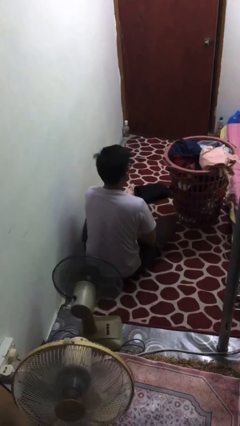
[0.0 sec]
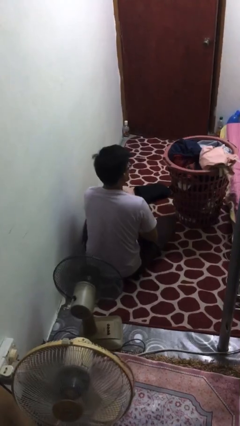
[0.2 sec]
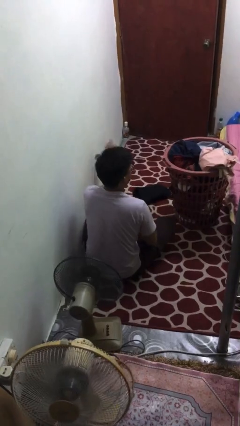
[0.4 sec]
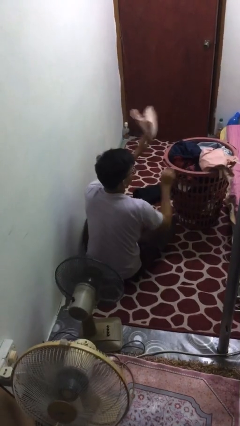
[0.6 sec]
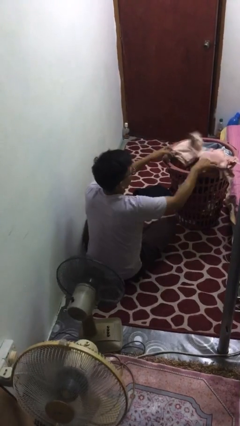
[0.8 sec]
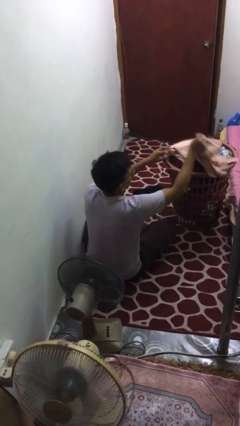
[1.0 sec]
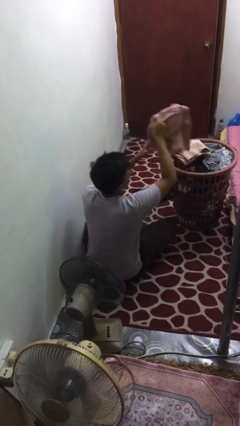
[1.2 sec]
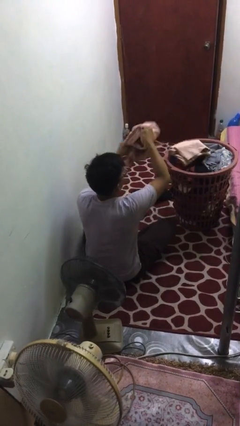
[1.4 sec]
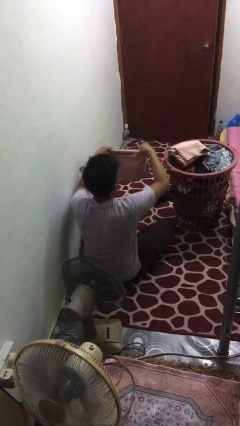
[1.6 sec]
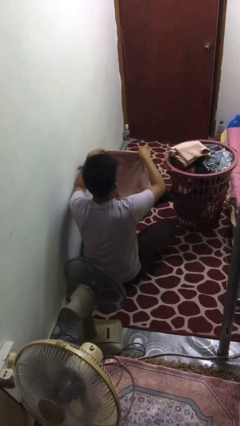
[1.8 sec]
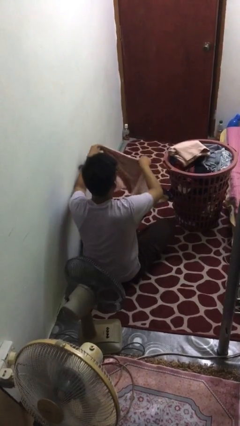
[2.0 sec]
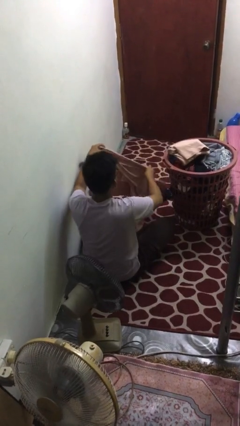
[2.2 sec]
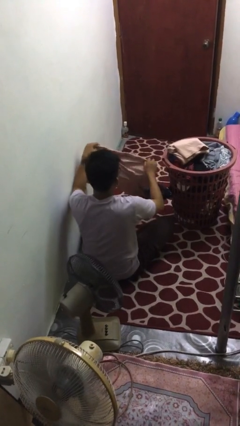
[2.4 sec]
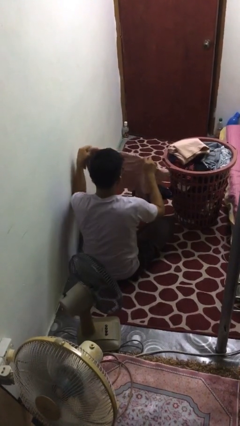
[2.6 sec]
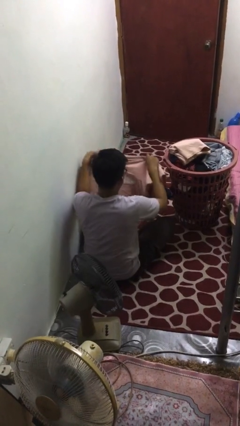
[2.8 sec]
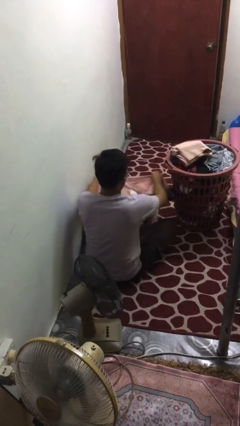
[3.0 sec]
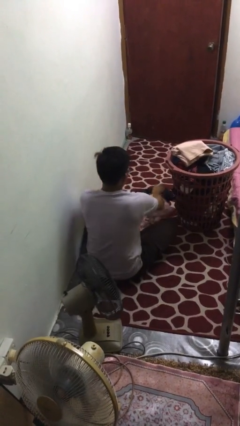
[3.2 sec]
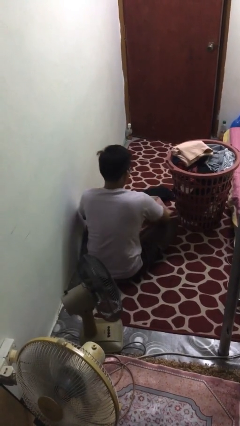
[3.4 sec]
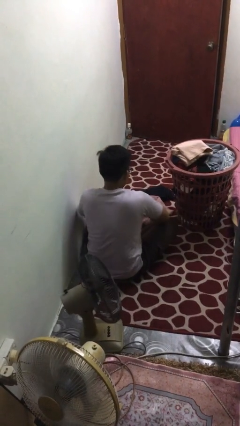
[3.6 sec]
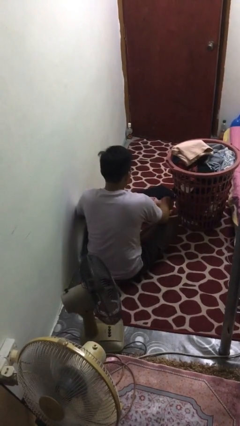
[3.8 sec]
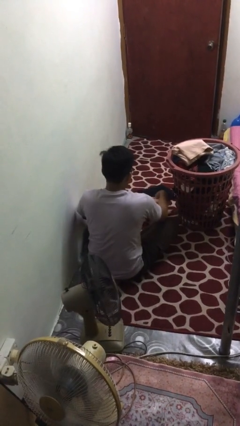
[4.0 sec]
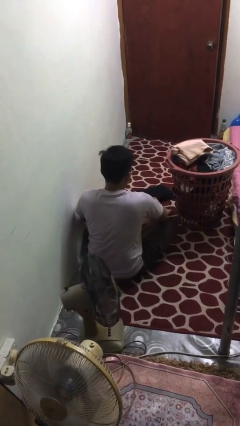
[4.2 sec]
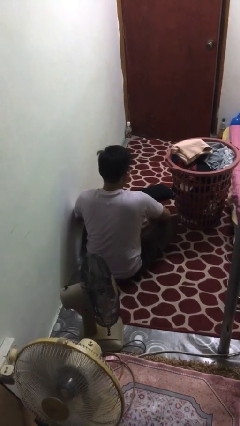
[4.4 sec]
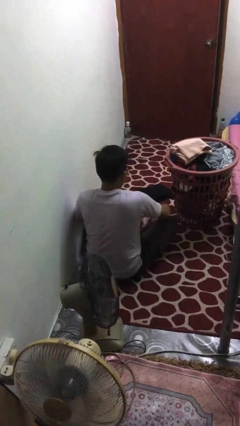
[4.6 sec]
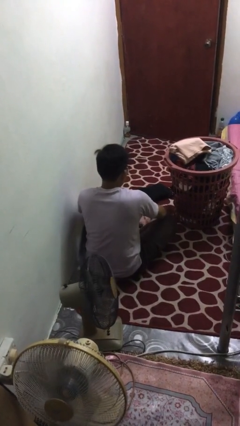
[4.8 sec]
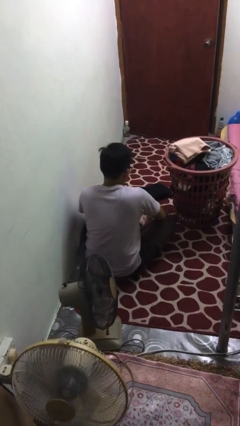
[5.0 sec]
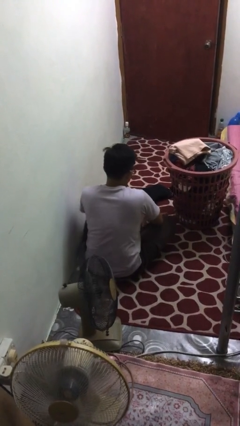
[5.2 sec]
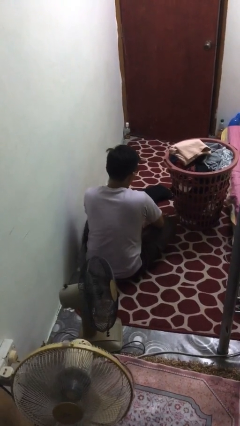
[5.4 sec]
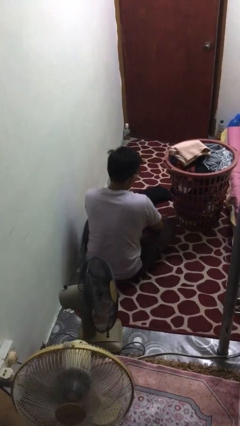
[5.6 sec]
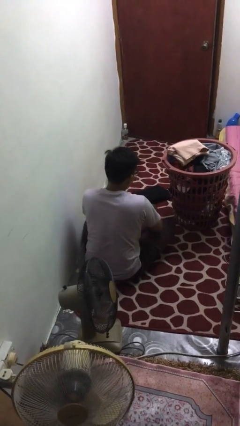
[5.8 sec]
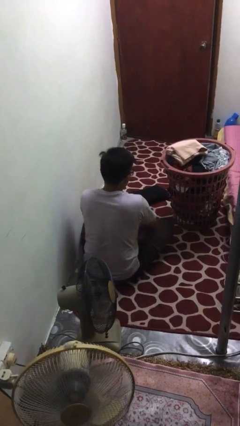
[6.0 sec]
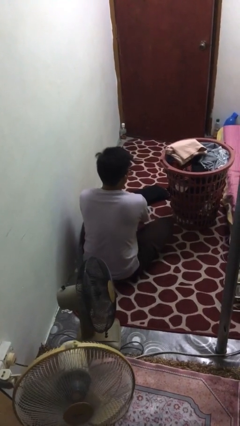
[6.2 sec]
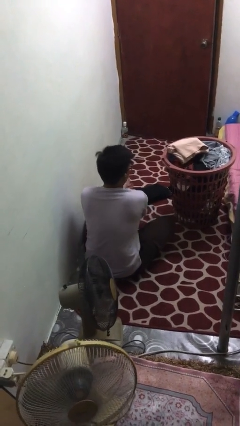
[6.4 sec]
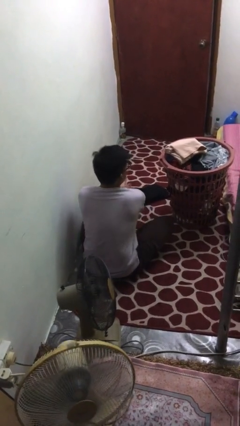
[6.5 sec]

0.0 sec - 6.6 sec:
person folds shirt

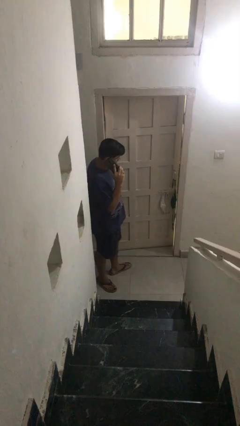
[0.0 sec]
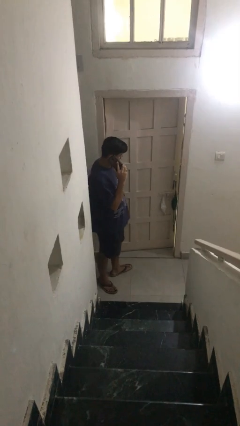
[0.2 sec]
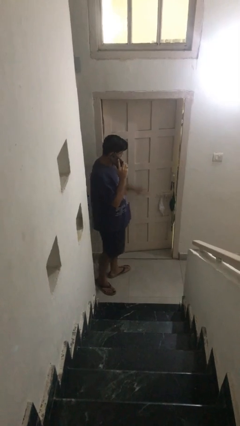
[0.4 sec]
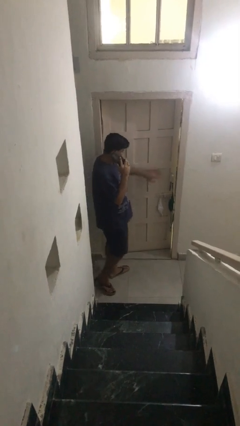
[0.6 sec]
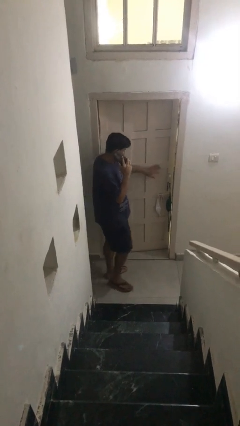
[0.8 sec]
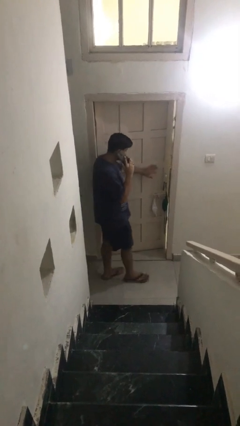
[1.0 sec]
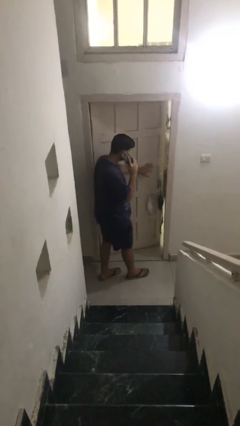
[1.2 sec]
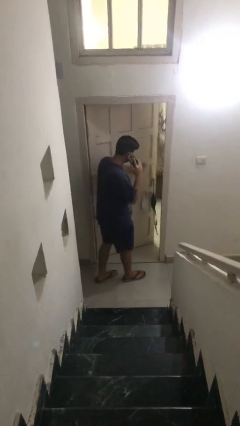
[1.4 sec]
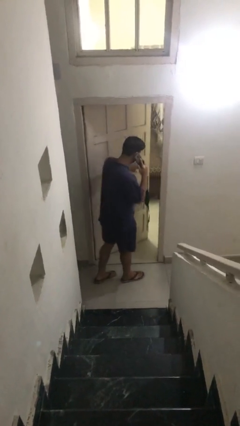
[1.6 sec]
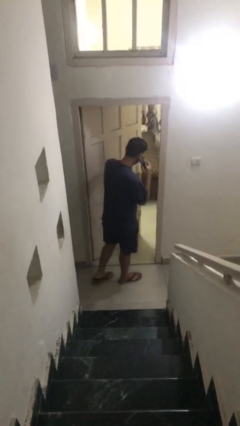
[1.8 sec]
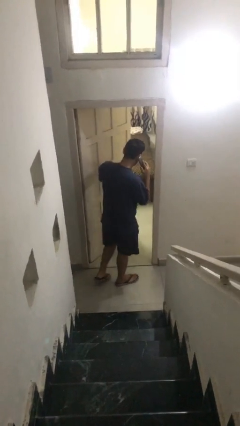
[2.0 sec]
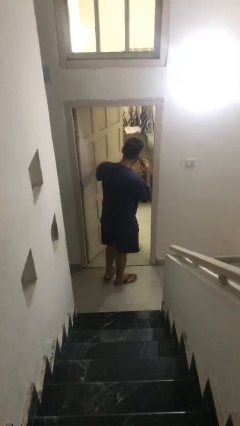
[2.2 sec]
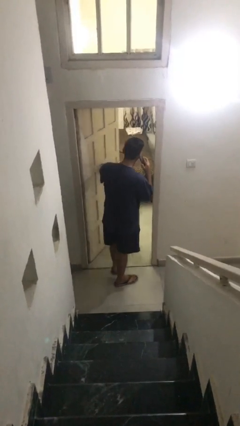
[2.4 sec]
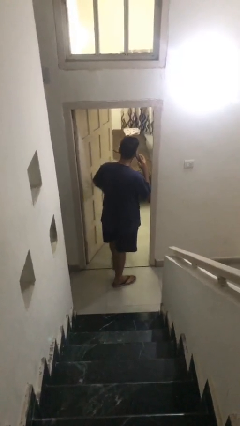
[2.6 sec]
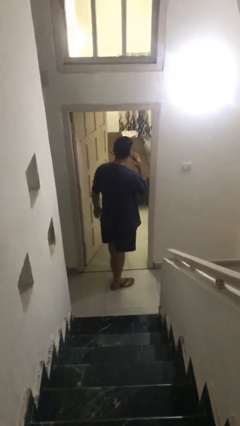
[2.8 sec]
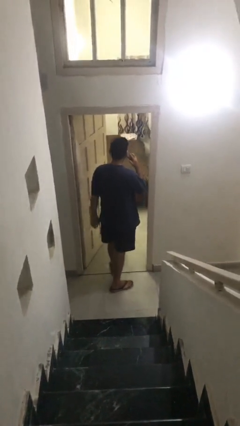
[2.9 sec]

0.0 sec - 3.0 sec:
person opens facility door

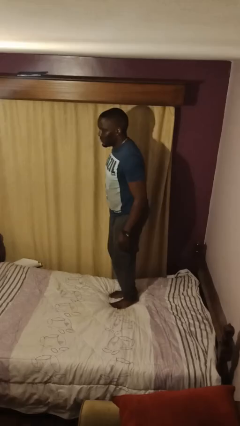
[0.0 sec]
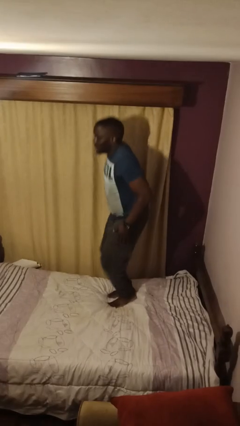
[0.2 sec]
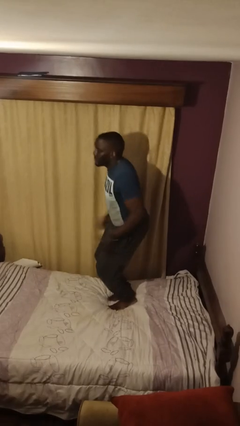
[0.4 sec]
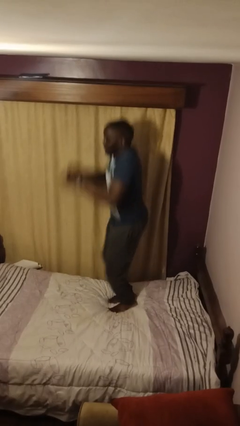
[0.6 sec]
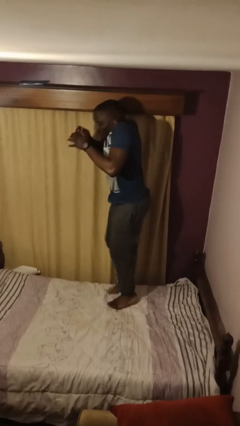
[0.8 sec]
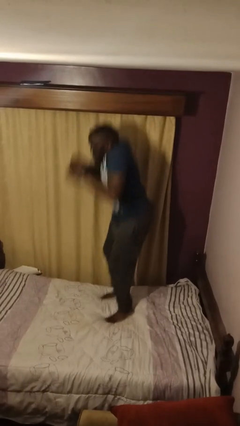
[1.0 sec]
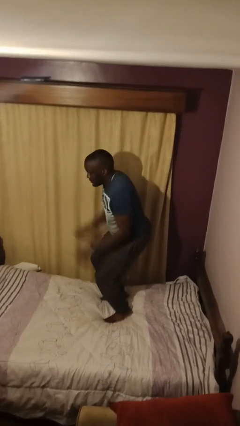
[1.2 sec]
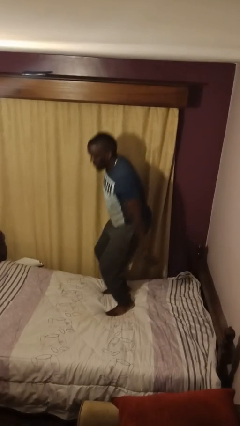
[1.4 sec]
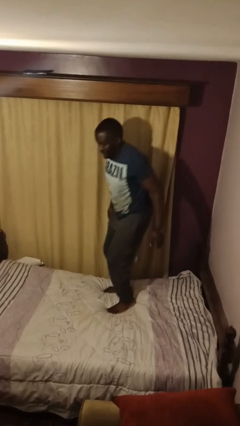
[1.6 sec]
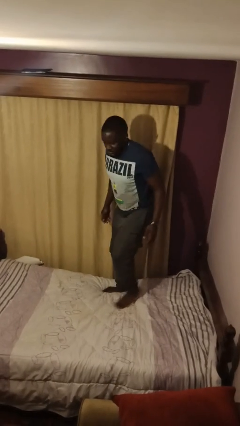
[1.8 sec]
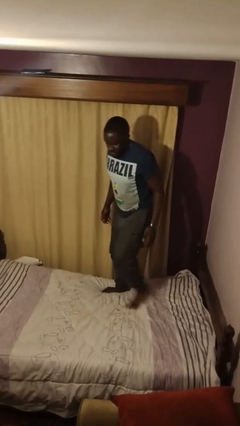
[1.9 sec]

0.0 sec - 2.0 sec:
person jumps on bed

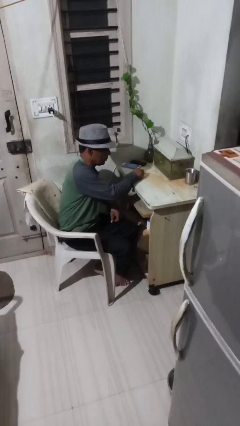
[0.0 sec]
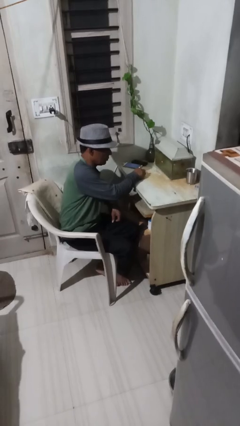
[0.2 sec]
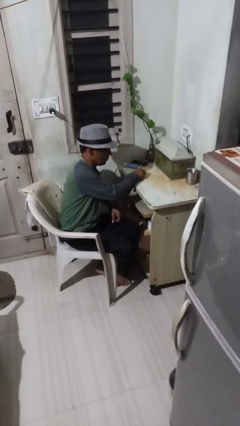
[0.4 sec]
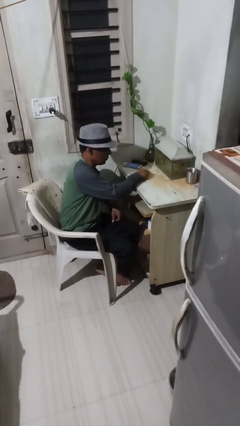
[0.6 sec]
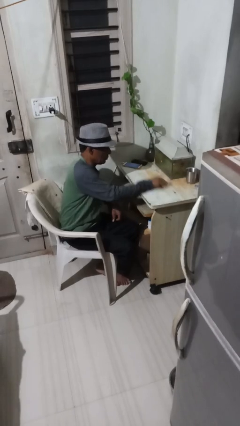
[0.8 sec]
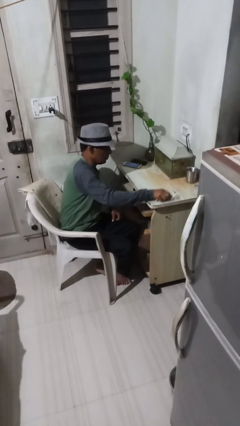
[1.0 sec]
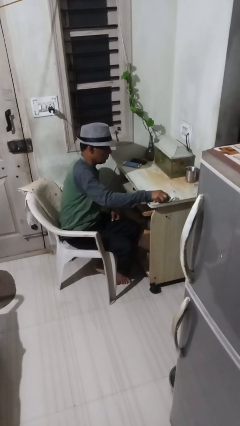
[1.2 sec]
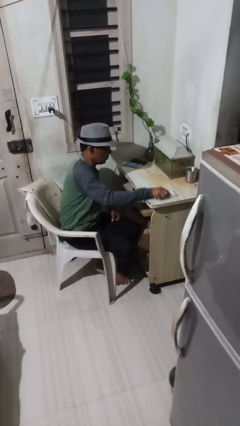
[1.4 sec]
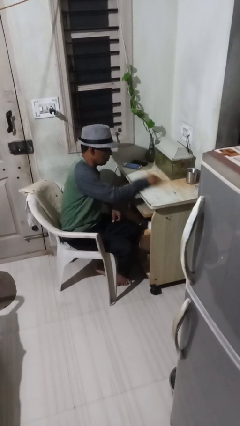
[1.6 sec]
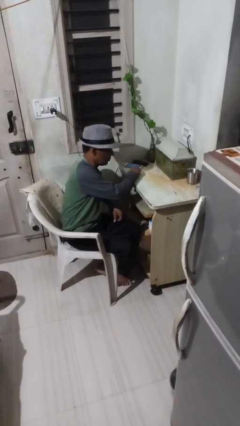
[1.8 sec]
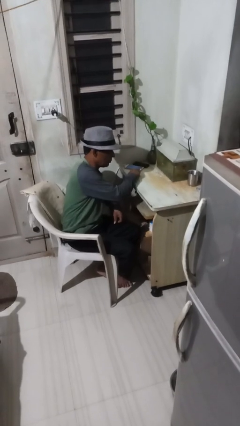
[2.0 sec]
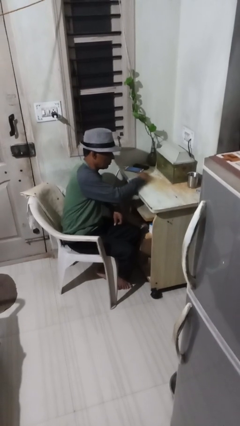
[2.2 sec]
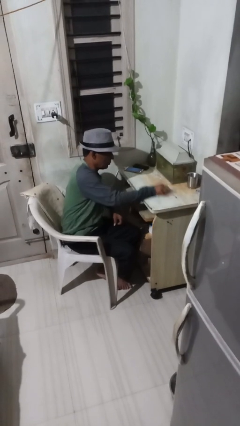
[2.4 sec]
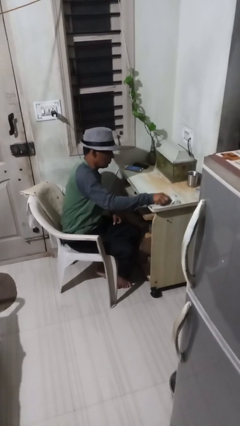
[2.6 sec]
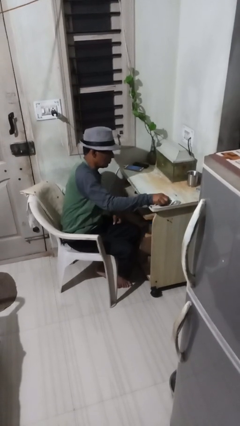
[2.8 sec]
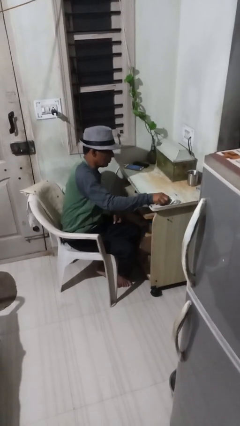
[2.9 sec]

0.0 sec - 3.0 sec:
person cleans table with rag

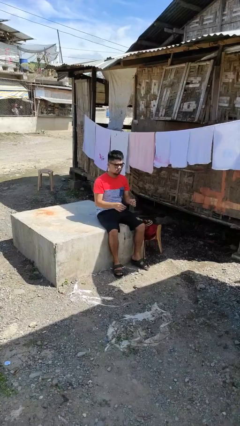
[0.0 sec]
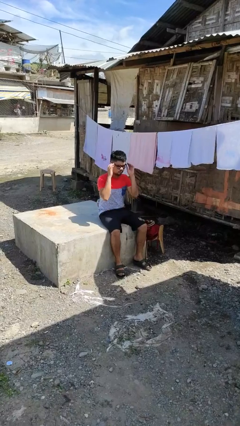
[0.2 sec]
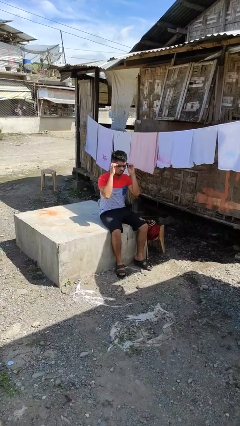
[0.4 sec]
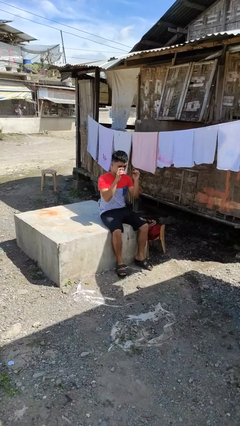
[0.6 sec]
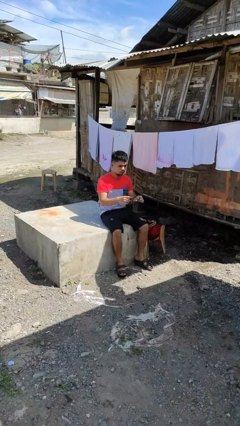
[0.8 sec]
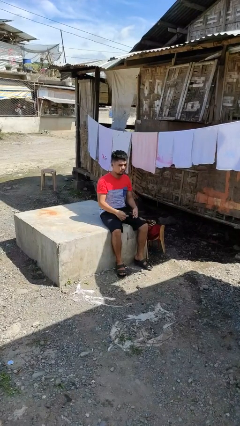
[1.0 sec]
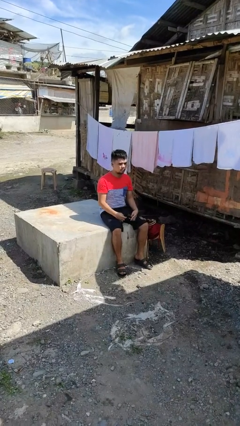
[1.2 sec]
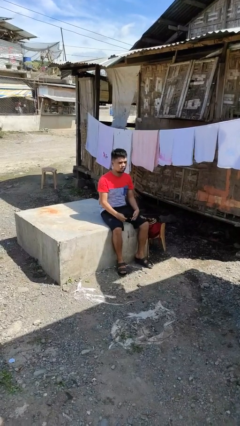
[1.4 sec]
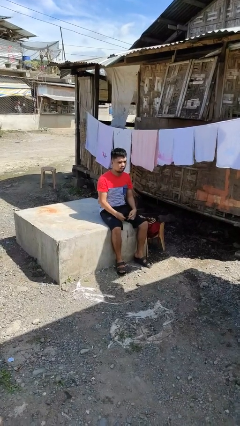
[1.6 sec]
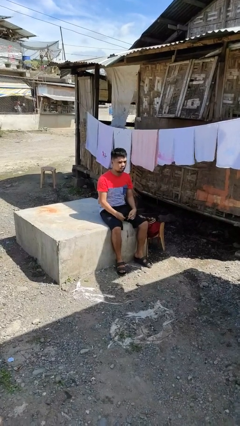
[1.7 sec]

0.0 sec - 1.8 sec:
person takes off glasses

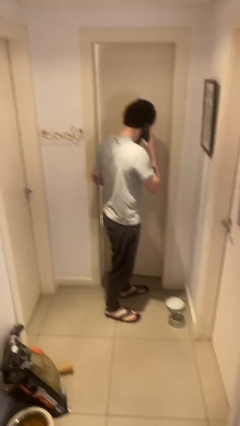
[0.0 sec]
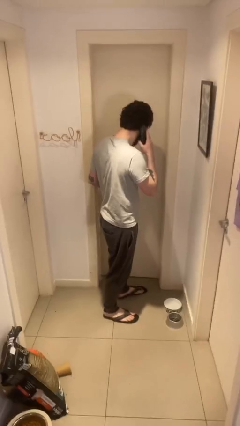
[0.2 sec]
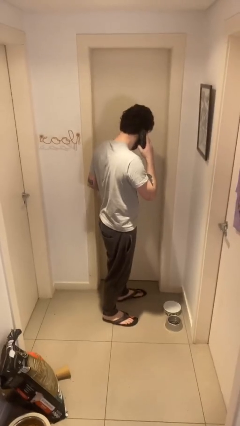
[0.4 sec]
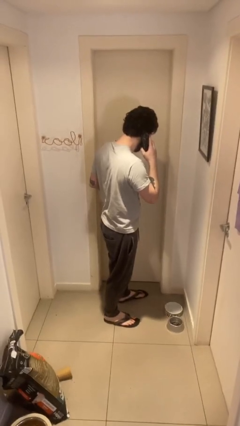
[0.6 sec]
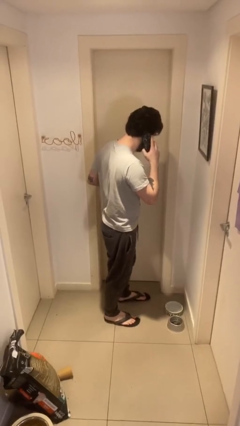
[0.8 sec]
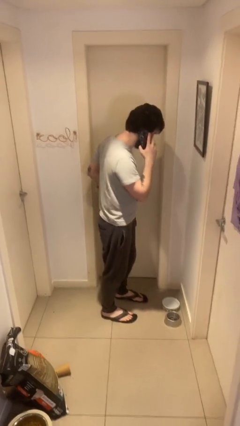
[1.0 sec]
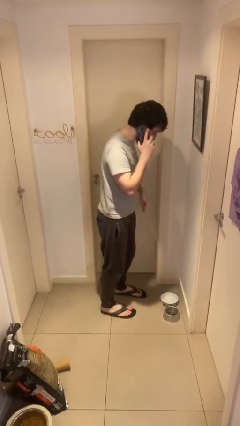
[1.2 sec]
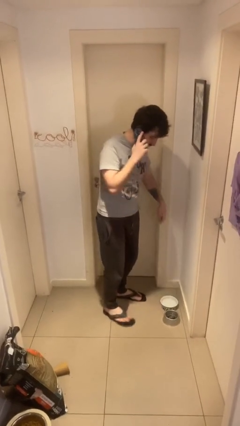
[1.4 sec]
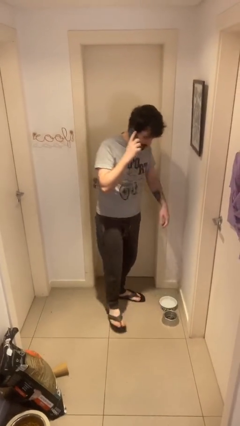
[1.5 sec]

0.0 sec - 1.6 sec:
person closes facility door
